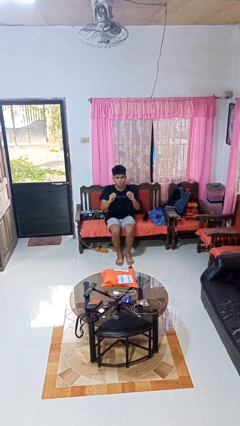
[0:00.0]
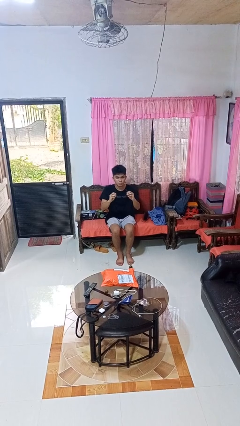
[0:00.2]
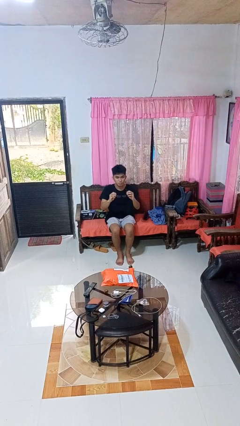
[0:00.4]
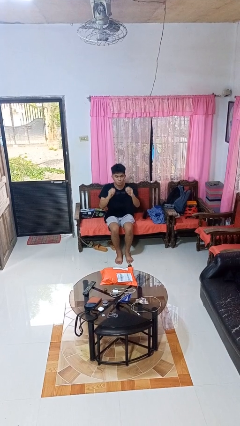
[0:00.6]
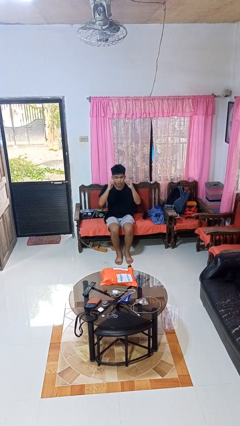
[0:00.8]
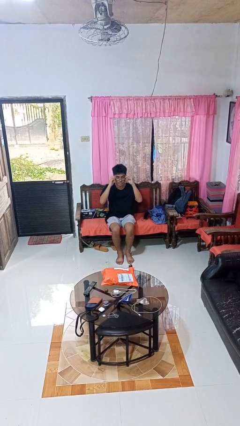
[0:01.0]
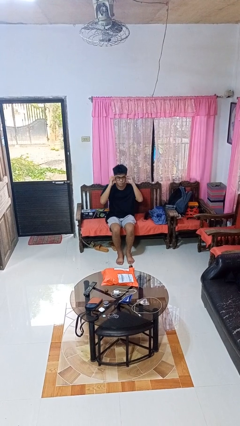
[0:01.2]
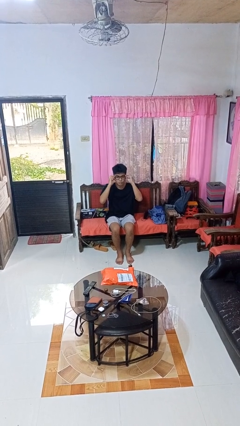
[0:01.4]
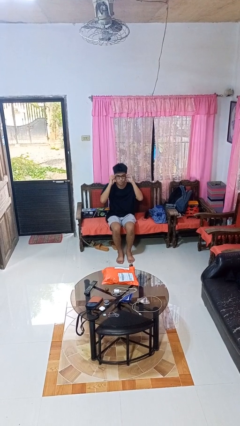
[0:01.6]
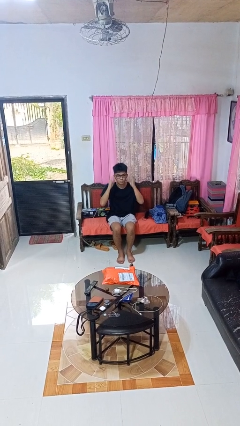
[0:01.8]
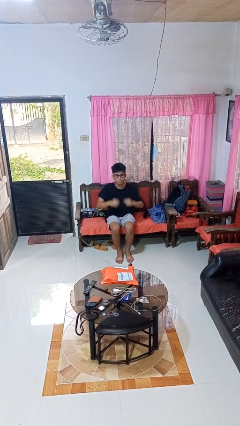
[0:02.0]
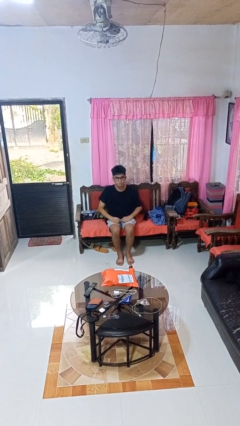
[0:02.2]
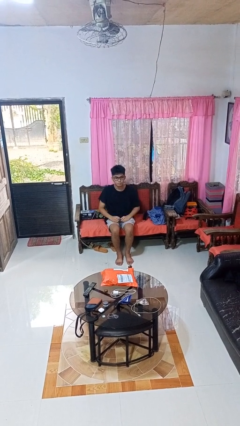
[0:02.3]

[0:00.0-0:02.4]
person puts on glasses

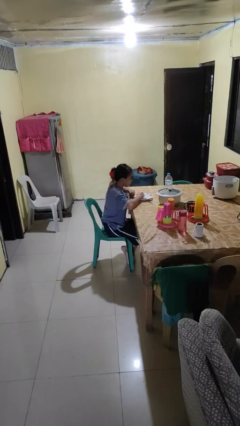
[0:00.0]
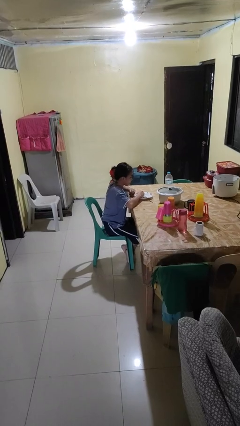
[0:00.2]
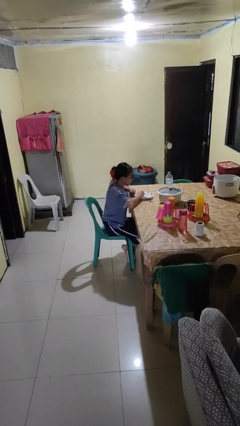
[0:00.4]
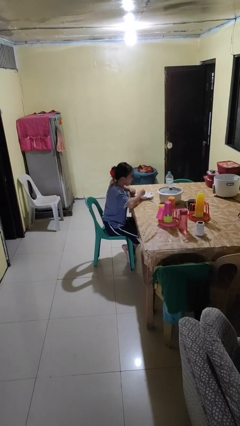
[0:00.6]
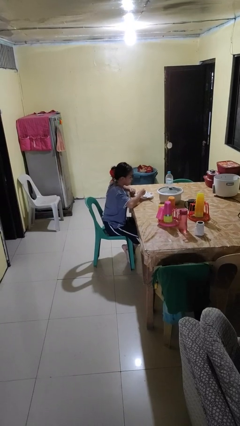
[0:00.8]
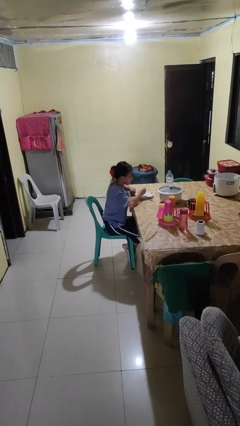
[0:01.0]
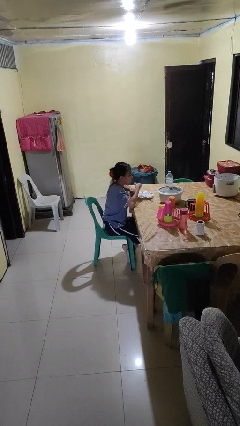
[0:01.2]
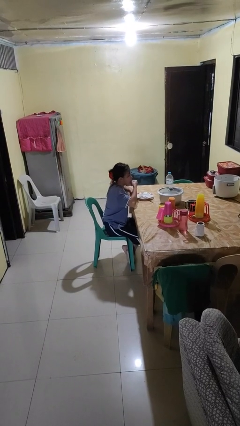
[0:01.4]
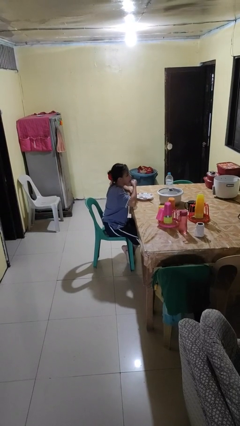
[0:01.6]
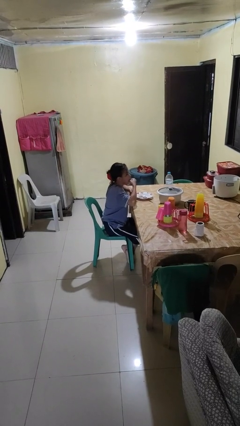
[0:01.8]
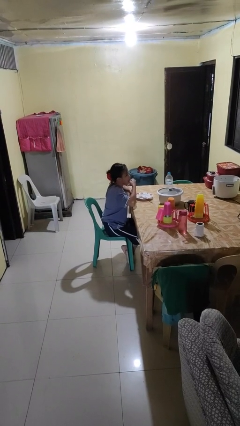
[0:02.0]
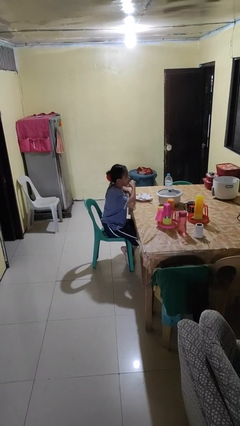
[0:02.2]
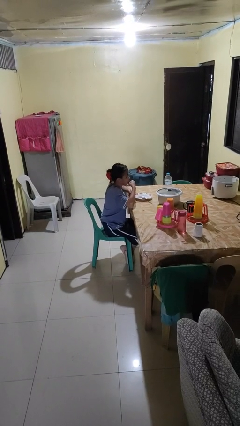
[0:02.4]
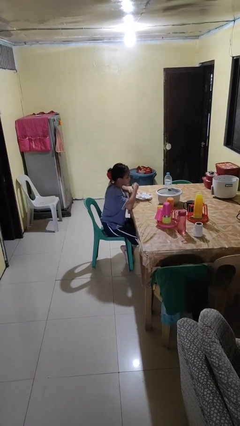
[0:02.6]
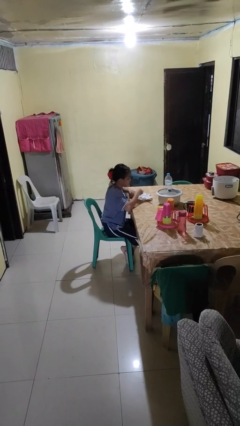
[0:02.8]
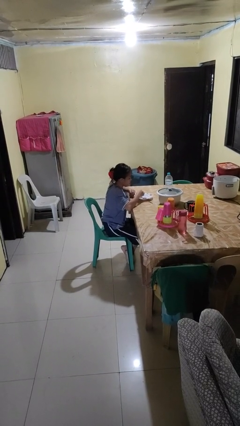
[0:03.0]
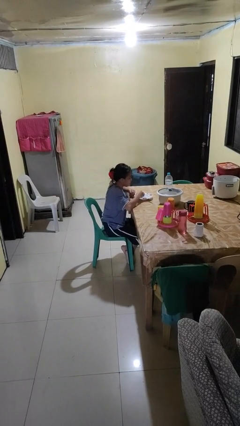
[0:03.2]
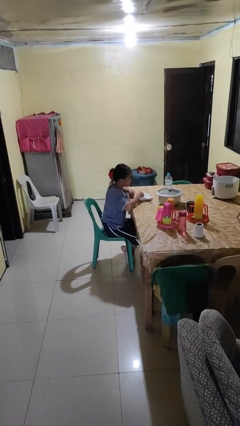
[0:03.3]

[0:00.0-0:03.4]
person eats with hands

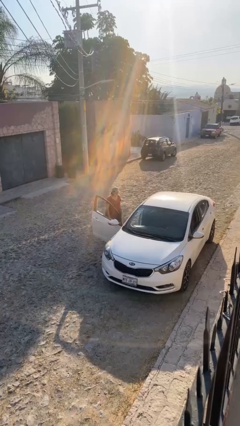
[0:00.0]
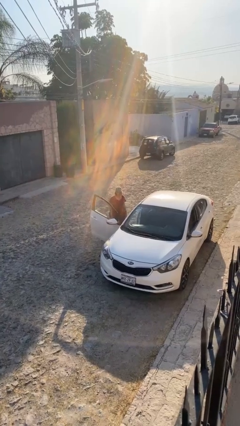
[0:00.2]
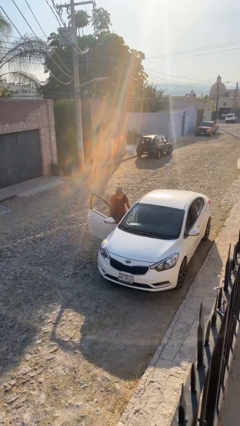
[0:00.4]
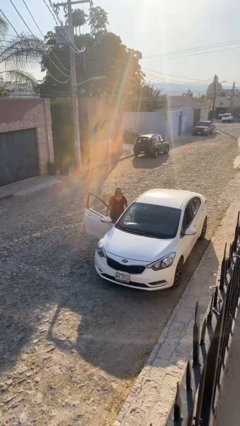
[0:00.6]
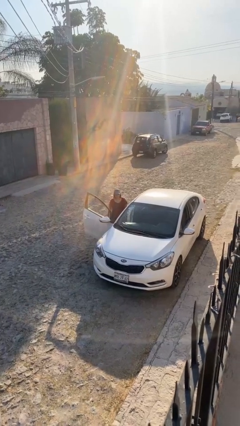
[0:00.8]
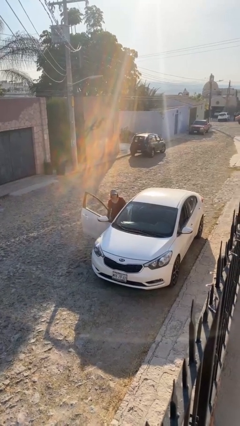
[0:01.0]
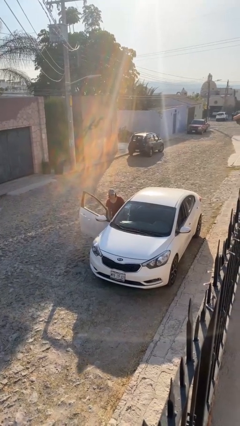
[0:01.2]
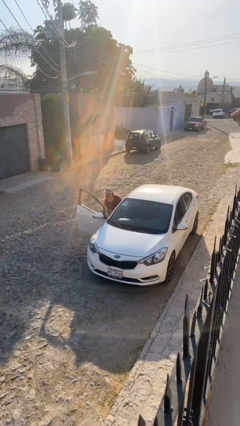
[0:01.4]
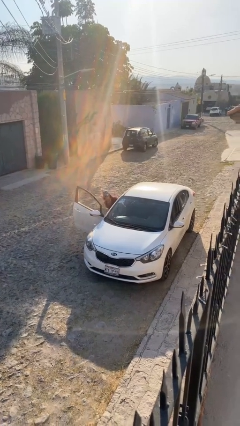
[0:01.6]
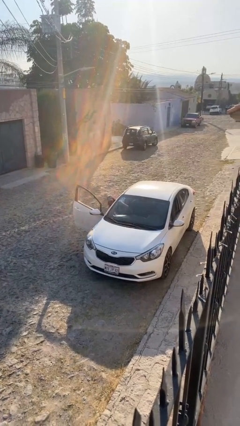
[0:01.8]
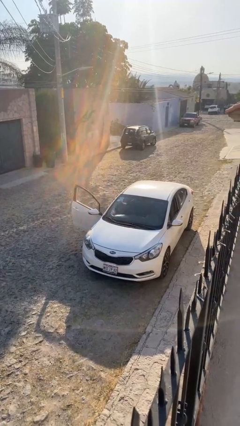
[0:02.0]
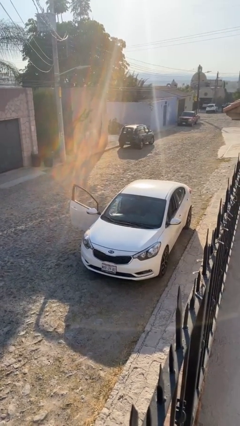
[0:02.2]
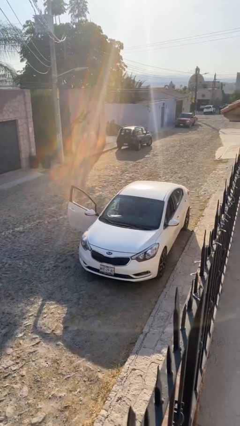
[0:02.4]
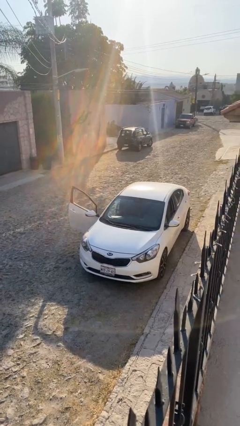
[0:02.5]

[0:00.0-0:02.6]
person enters car

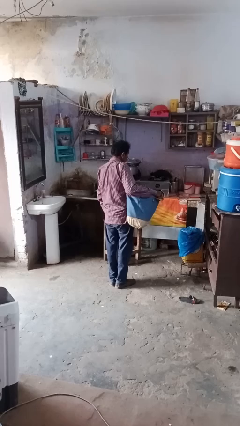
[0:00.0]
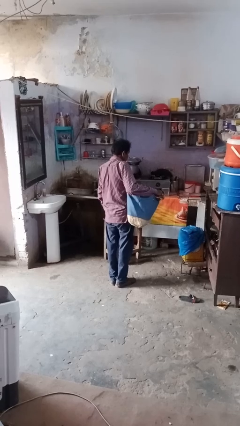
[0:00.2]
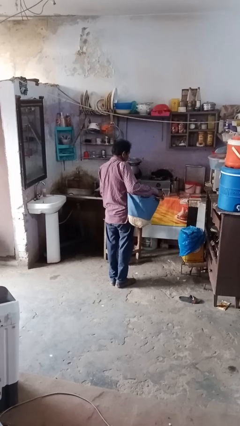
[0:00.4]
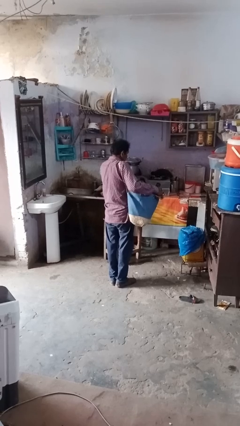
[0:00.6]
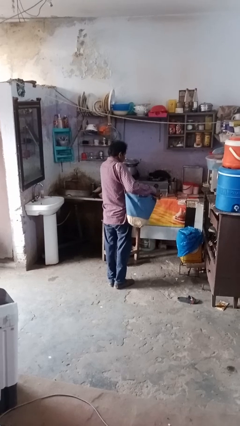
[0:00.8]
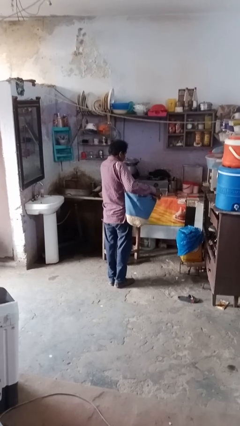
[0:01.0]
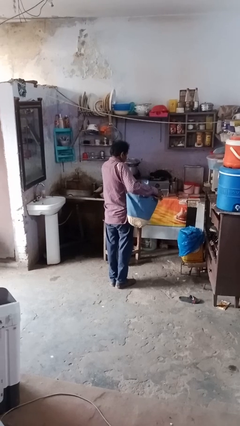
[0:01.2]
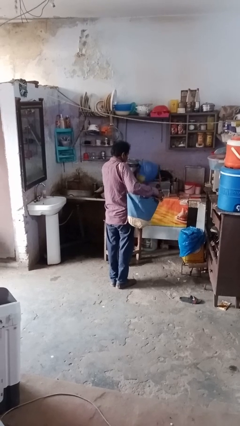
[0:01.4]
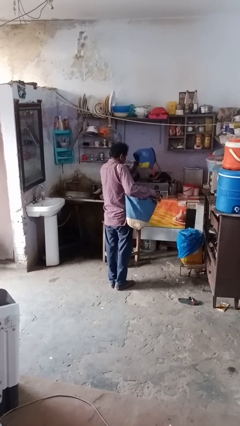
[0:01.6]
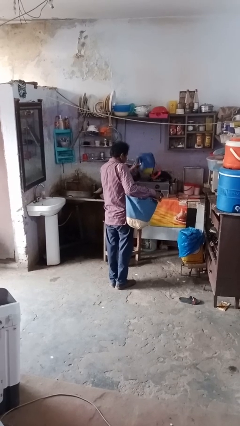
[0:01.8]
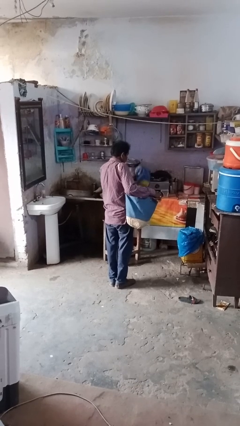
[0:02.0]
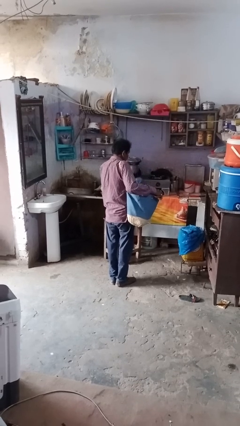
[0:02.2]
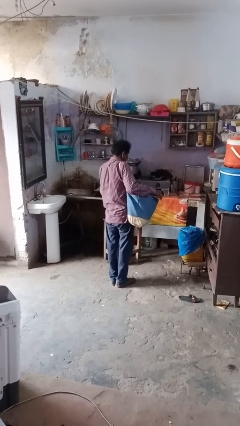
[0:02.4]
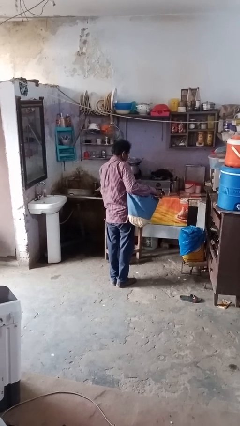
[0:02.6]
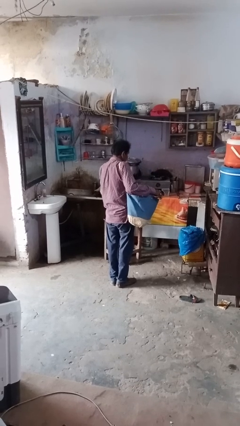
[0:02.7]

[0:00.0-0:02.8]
person takes object from bag

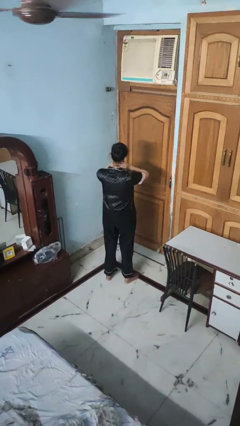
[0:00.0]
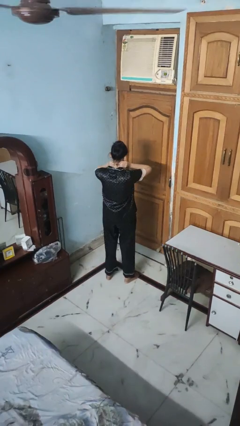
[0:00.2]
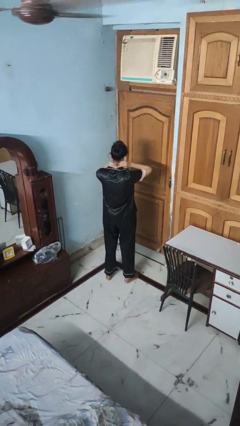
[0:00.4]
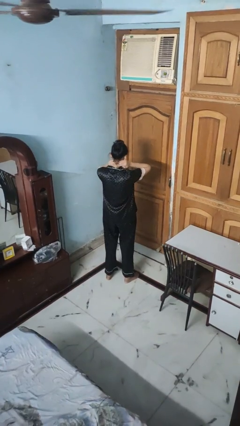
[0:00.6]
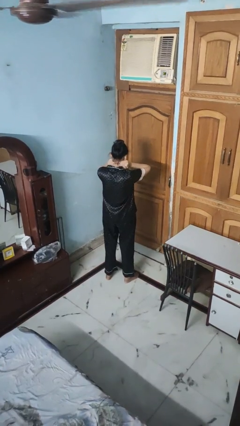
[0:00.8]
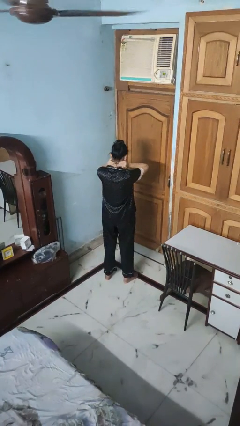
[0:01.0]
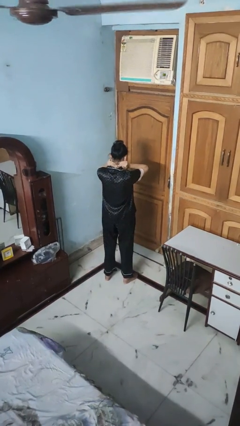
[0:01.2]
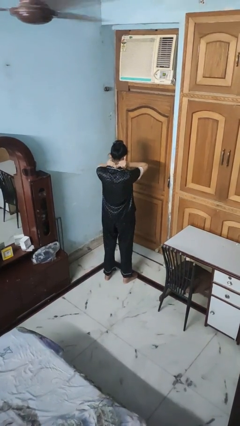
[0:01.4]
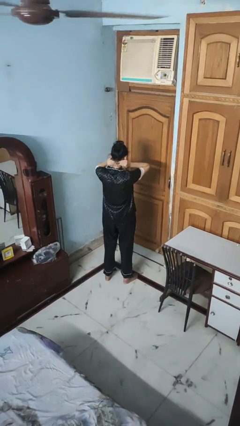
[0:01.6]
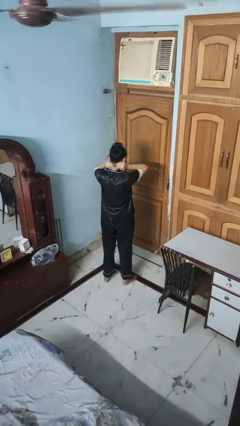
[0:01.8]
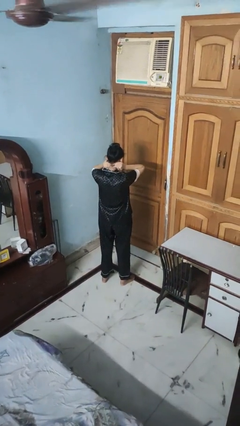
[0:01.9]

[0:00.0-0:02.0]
person rubs neck

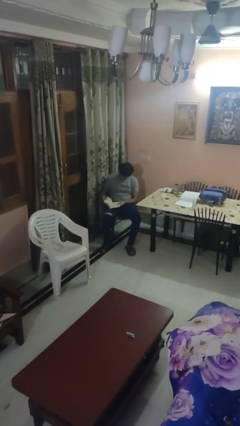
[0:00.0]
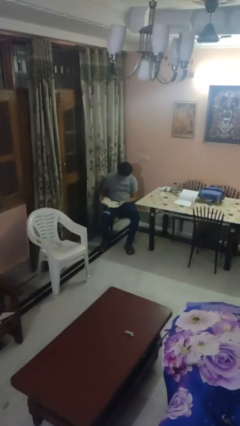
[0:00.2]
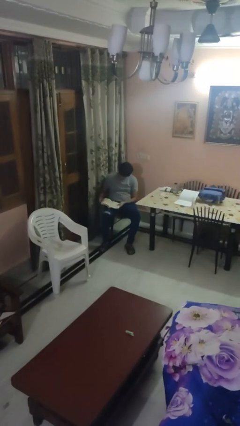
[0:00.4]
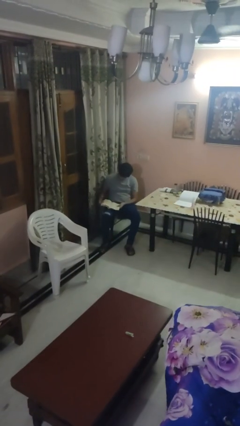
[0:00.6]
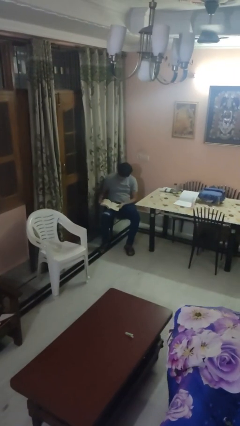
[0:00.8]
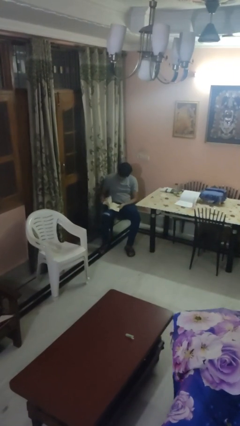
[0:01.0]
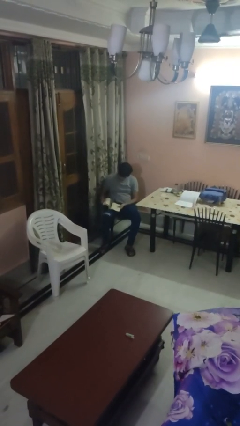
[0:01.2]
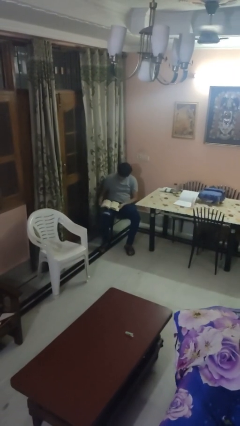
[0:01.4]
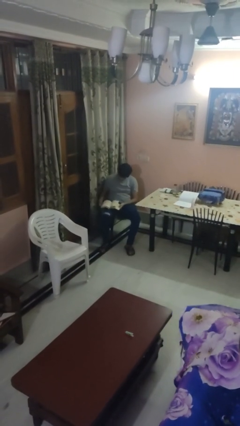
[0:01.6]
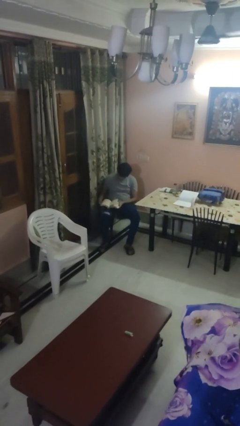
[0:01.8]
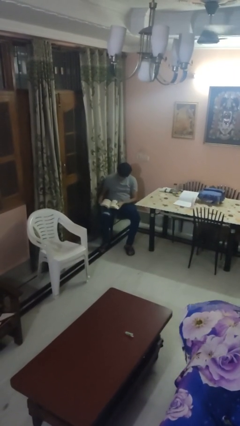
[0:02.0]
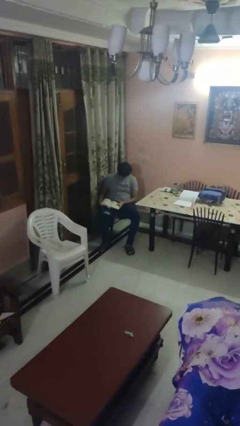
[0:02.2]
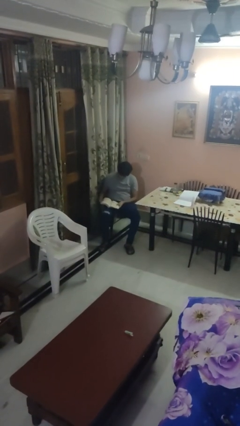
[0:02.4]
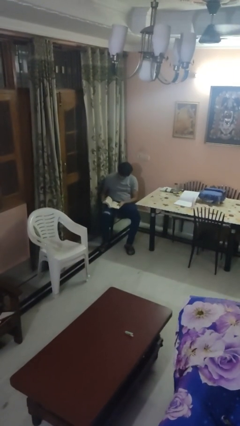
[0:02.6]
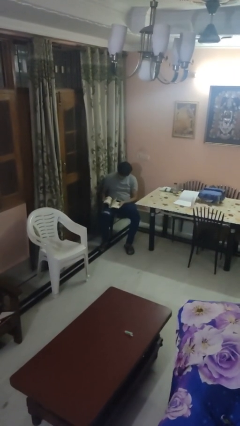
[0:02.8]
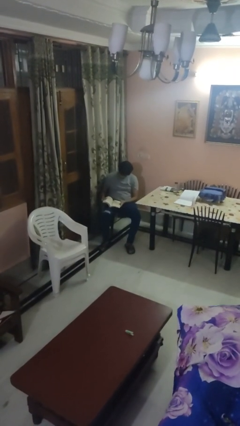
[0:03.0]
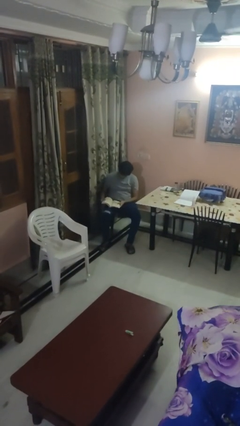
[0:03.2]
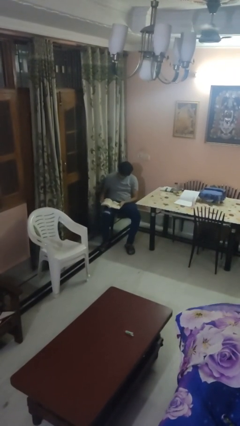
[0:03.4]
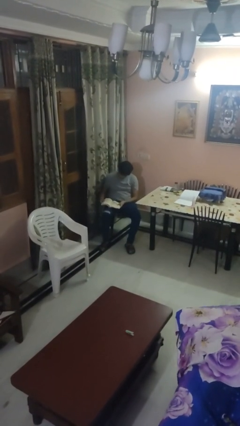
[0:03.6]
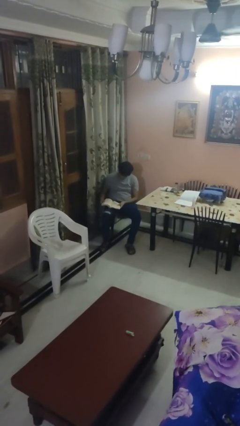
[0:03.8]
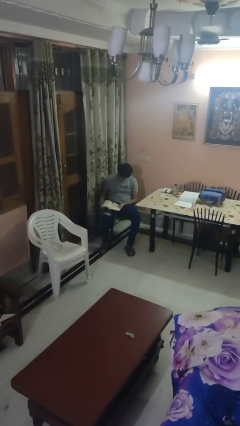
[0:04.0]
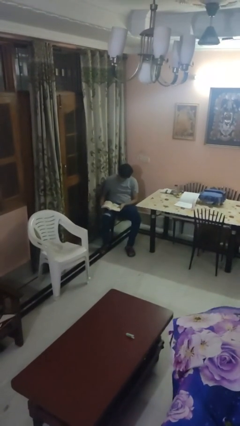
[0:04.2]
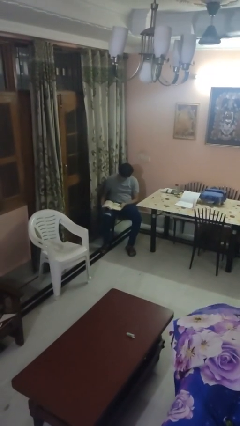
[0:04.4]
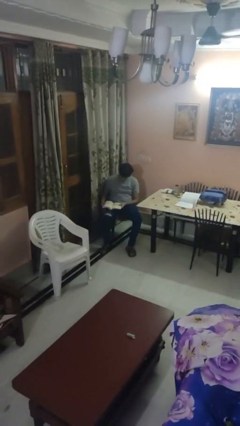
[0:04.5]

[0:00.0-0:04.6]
person reads book
